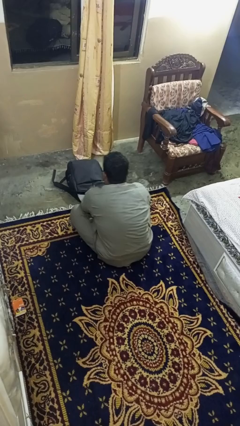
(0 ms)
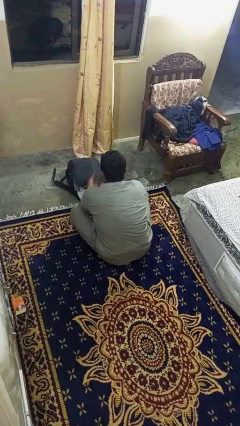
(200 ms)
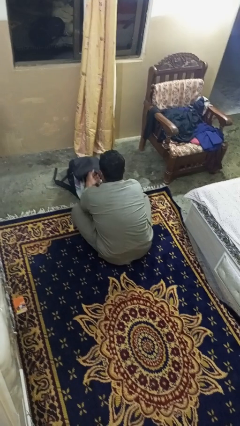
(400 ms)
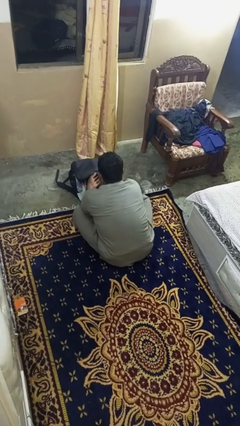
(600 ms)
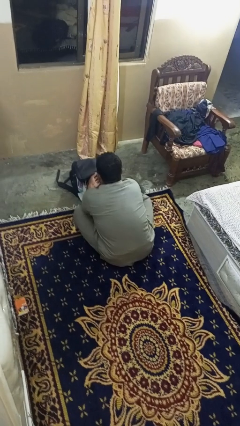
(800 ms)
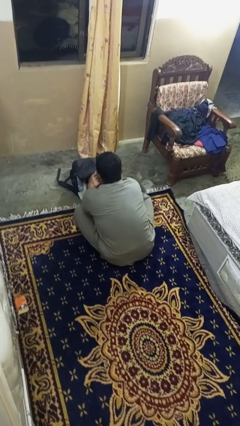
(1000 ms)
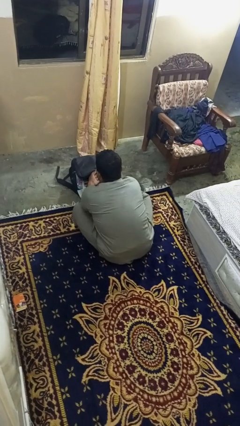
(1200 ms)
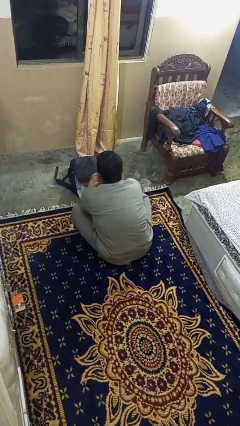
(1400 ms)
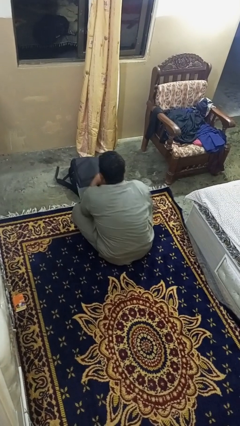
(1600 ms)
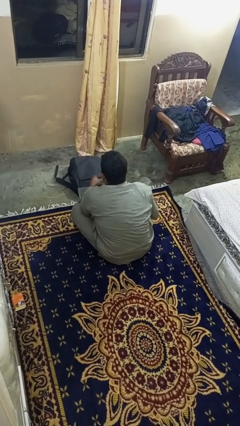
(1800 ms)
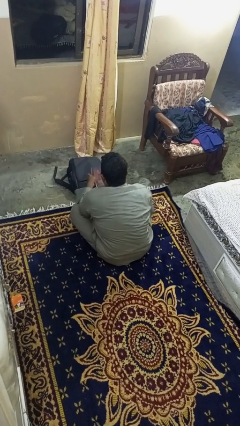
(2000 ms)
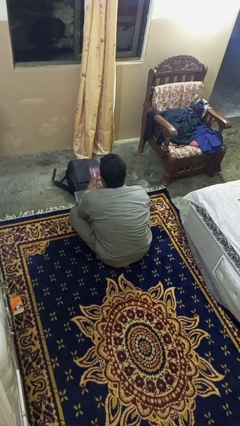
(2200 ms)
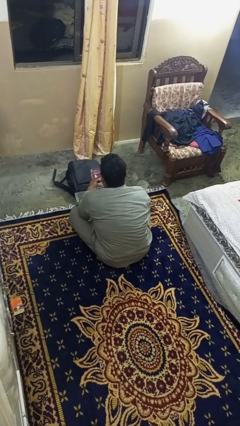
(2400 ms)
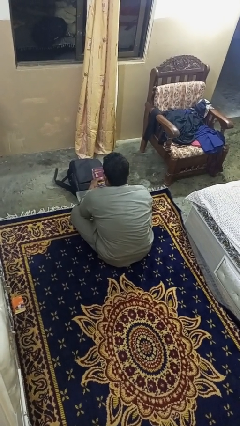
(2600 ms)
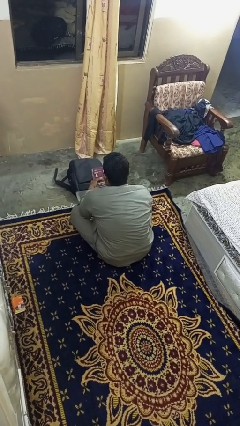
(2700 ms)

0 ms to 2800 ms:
person takes object from bag

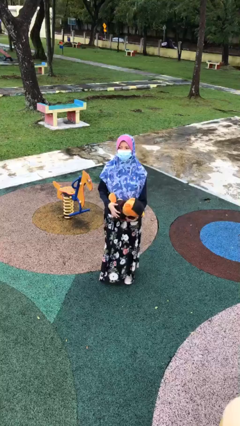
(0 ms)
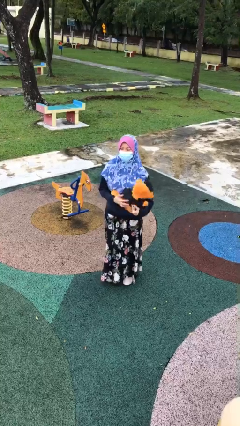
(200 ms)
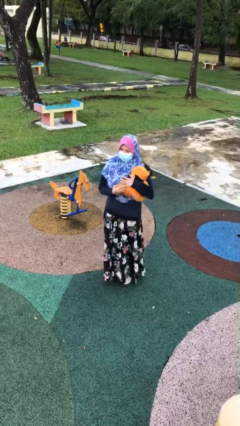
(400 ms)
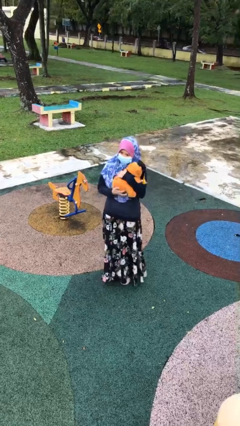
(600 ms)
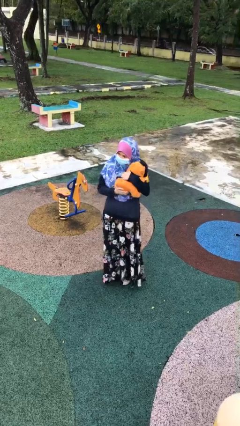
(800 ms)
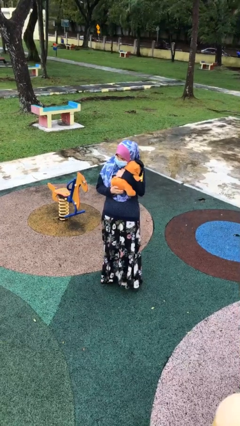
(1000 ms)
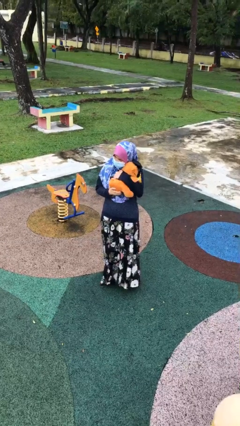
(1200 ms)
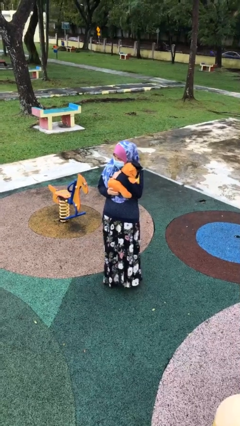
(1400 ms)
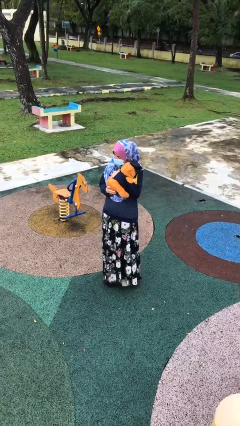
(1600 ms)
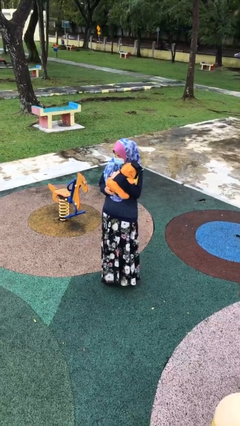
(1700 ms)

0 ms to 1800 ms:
person hugs stuffed animal

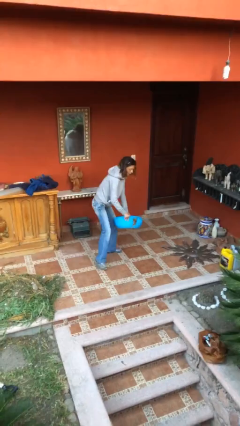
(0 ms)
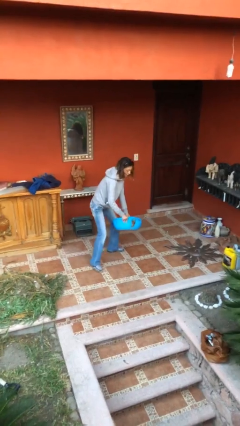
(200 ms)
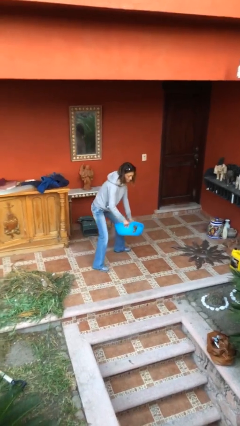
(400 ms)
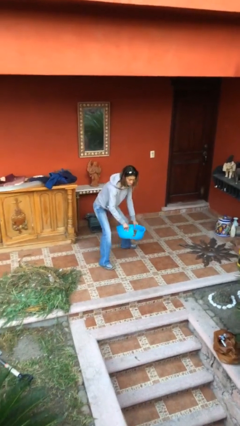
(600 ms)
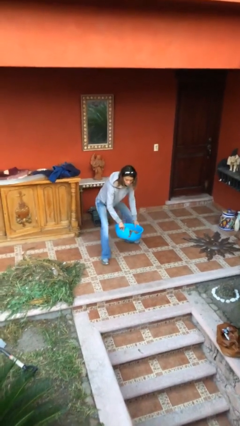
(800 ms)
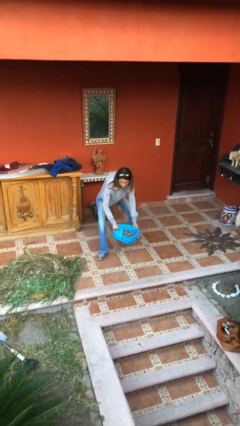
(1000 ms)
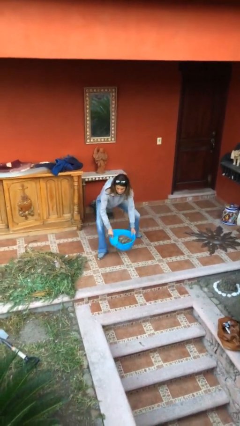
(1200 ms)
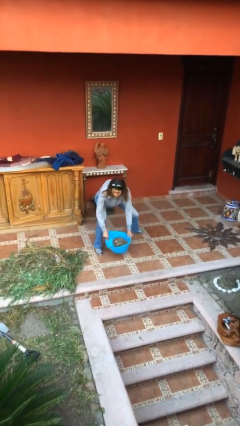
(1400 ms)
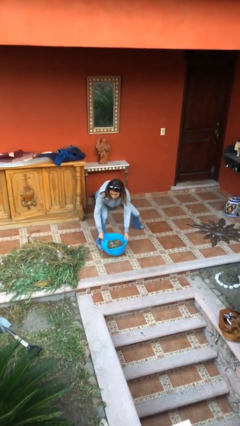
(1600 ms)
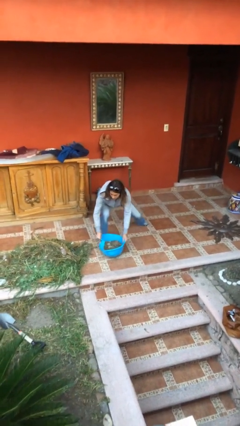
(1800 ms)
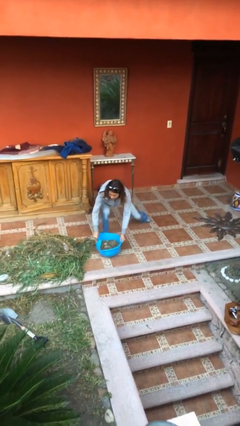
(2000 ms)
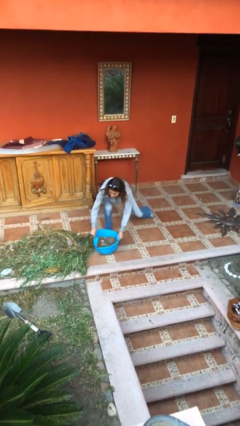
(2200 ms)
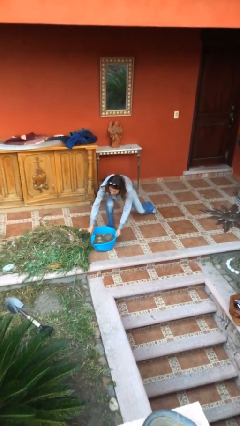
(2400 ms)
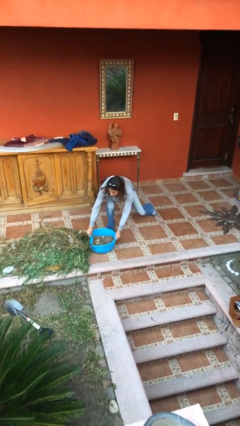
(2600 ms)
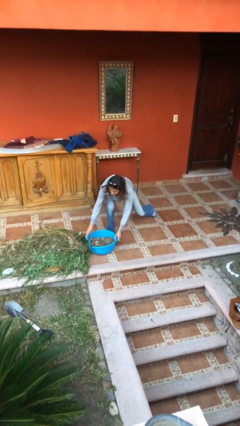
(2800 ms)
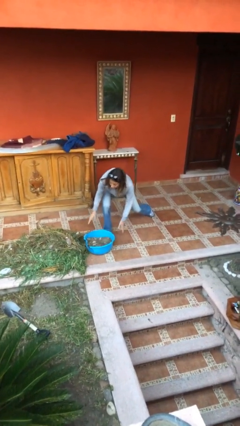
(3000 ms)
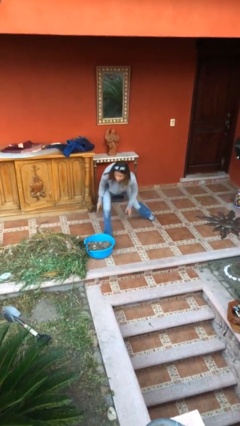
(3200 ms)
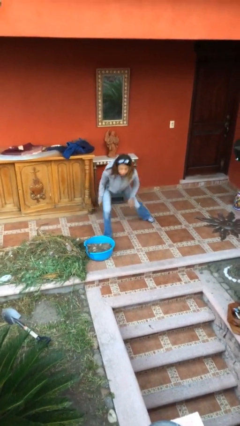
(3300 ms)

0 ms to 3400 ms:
person puts down object on floor

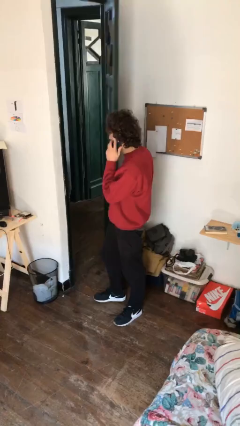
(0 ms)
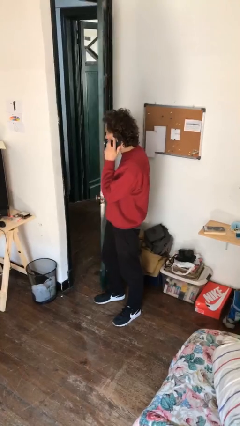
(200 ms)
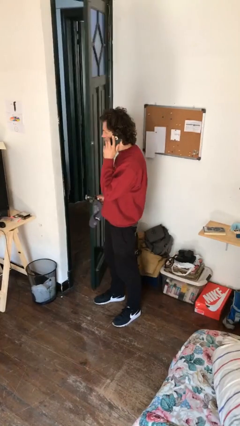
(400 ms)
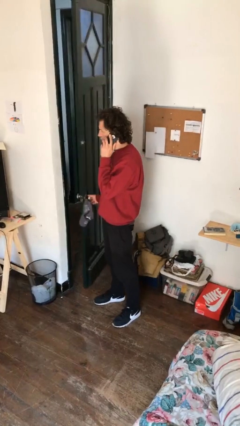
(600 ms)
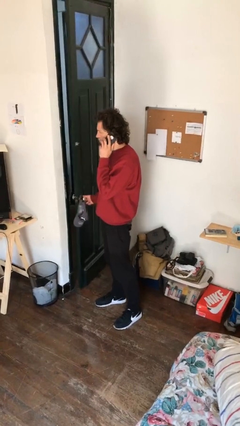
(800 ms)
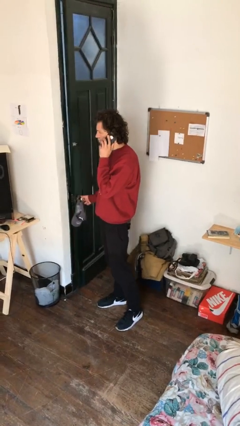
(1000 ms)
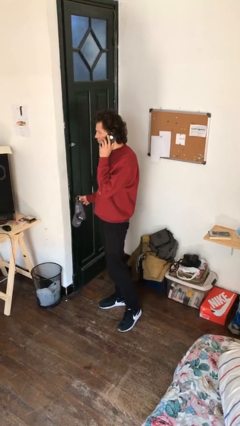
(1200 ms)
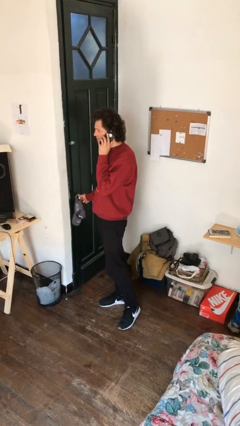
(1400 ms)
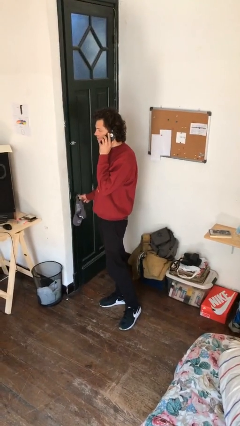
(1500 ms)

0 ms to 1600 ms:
person closes facility door

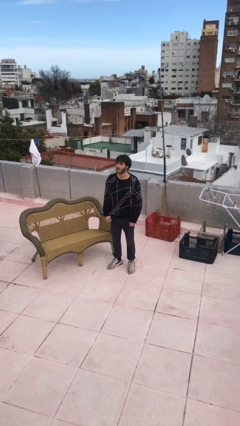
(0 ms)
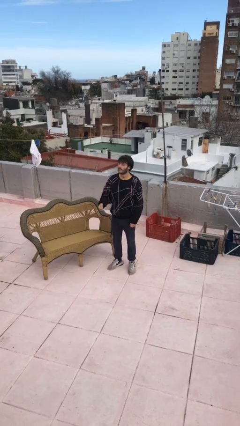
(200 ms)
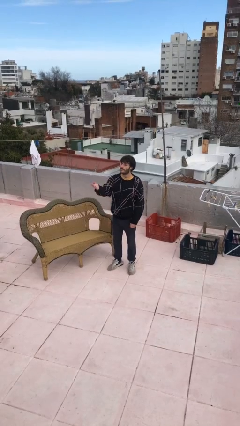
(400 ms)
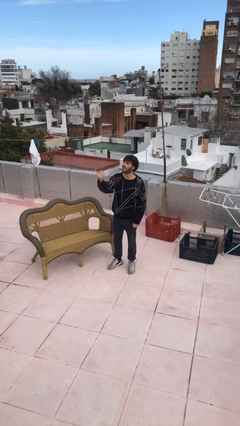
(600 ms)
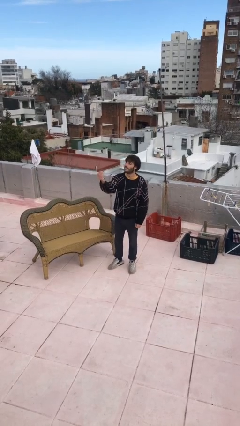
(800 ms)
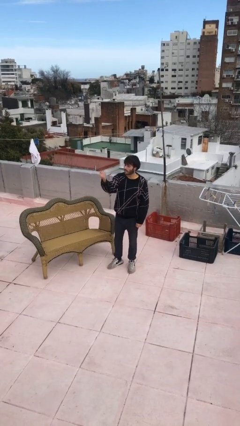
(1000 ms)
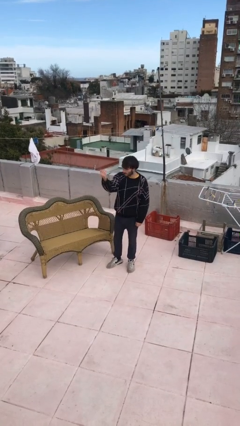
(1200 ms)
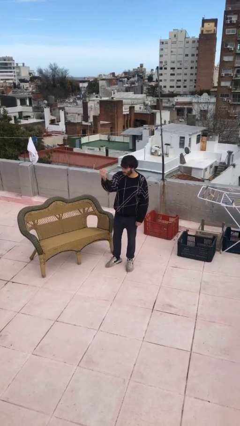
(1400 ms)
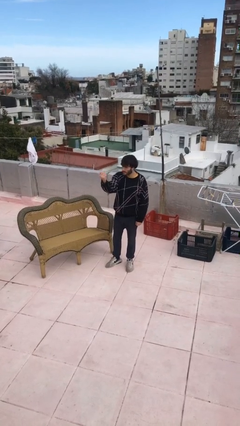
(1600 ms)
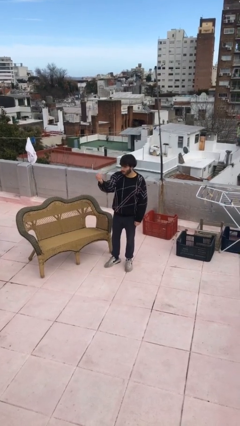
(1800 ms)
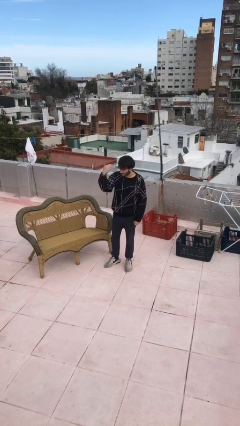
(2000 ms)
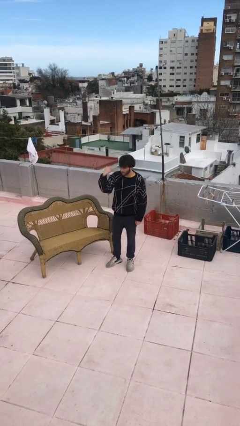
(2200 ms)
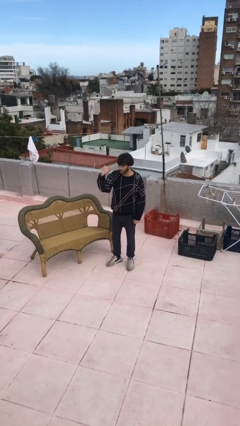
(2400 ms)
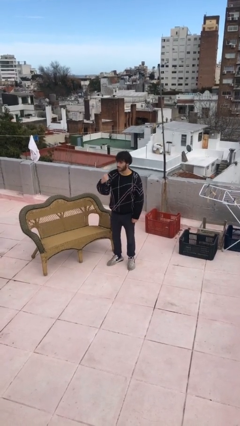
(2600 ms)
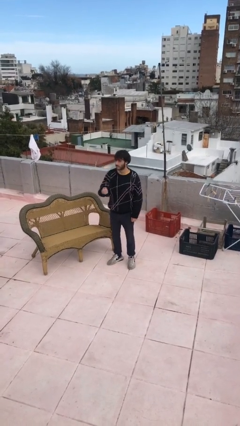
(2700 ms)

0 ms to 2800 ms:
person gestures come here

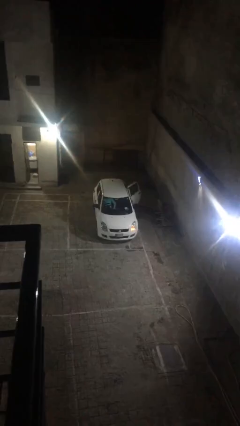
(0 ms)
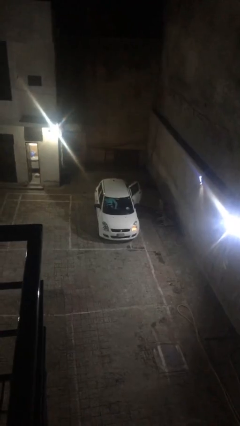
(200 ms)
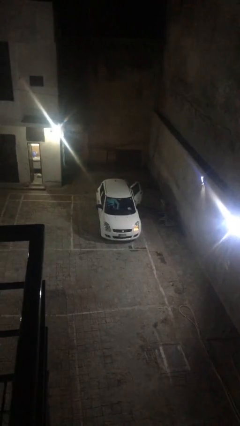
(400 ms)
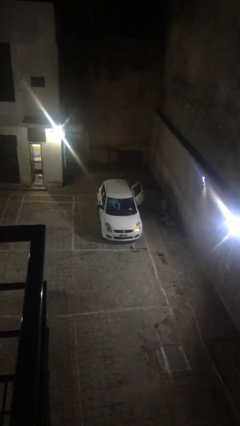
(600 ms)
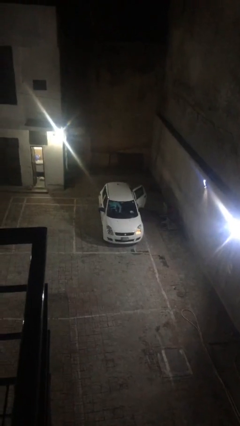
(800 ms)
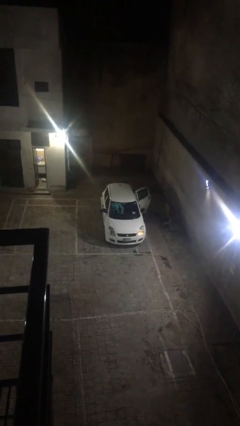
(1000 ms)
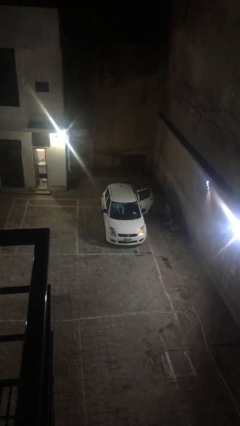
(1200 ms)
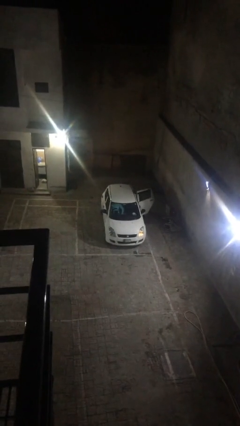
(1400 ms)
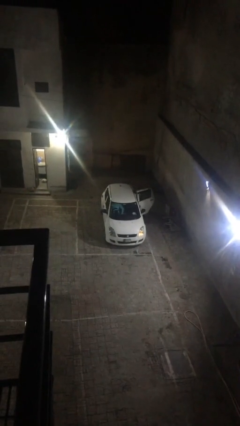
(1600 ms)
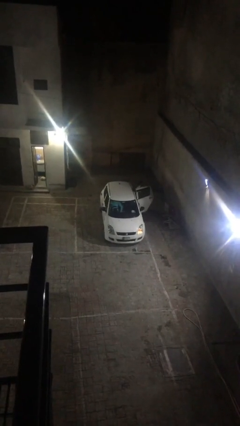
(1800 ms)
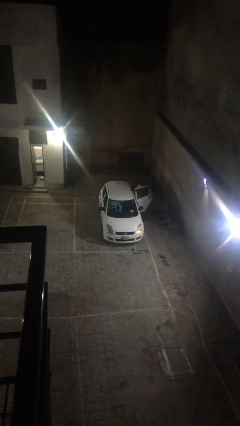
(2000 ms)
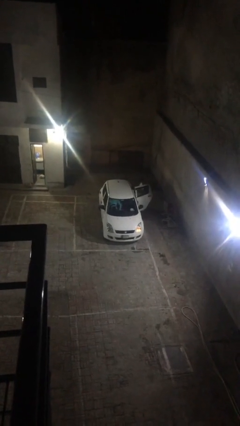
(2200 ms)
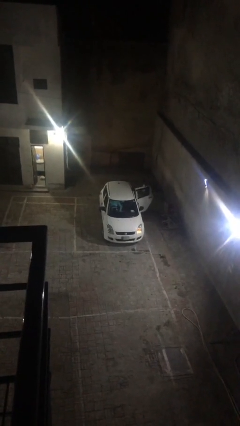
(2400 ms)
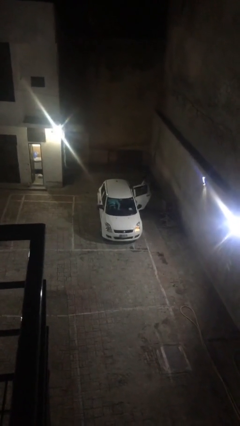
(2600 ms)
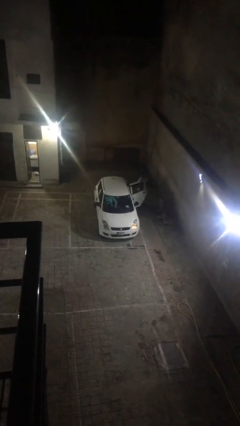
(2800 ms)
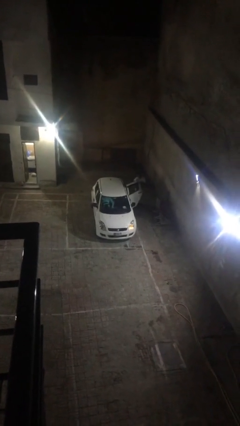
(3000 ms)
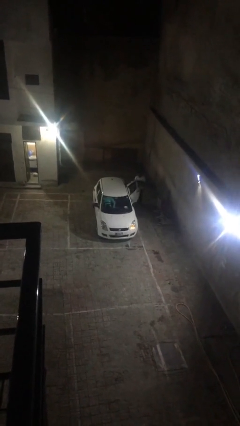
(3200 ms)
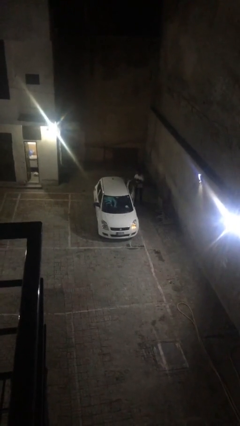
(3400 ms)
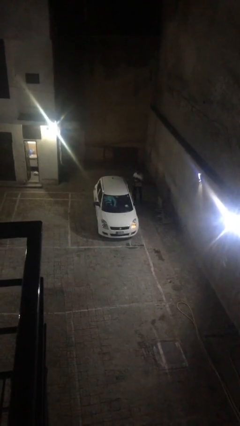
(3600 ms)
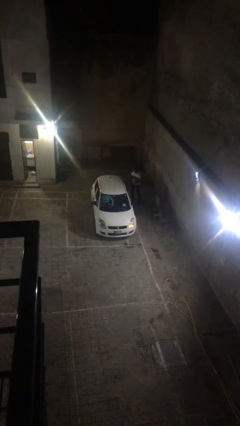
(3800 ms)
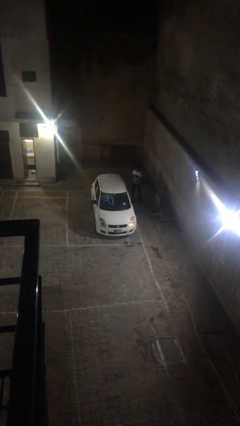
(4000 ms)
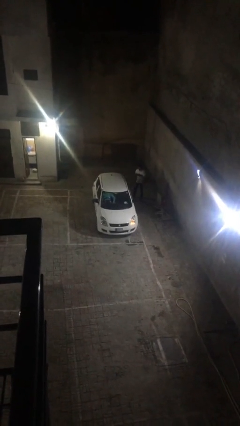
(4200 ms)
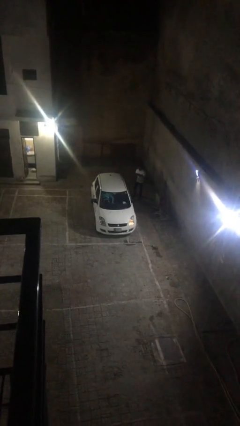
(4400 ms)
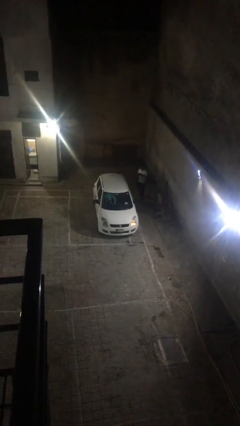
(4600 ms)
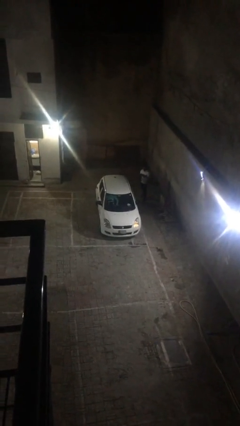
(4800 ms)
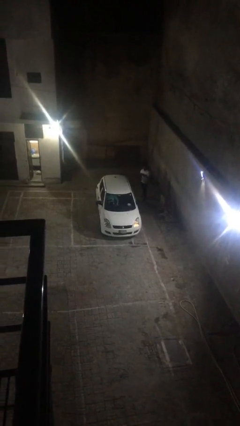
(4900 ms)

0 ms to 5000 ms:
car drops off person
